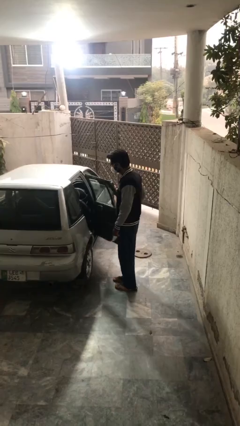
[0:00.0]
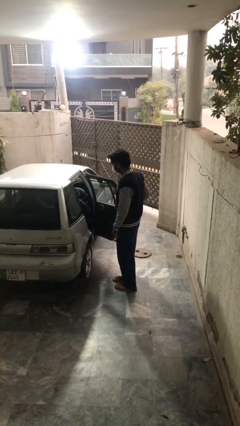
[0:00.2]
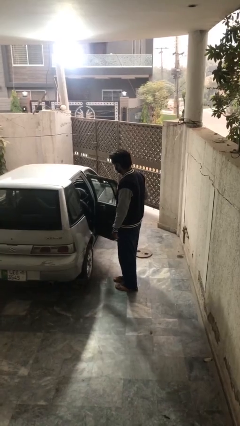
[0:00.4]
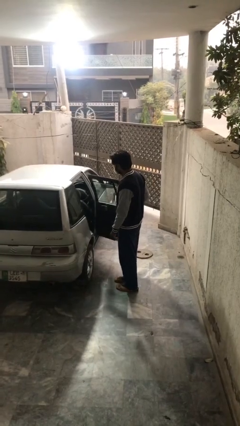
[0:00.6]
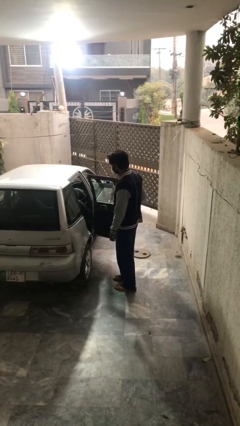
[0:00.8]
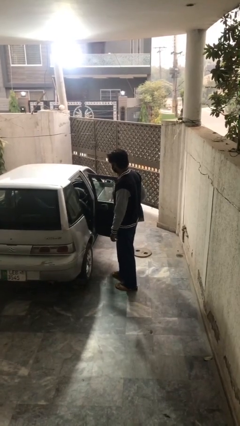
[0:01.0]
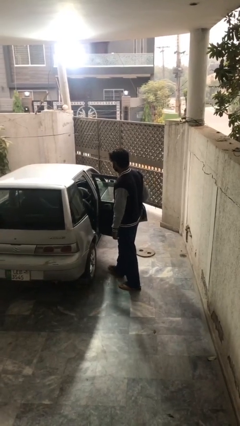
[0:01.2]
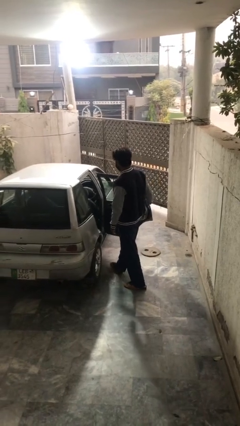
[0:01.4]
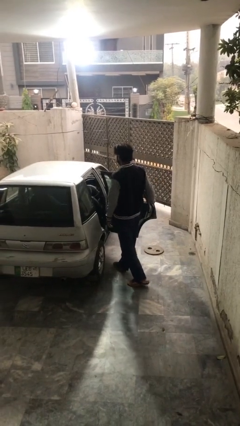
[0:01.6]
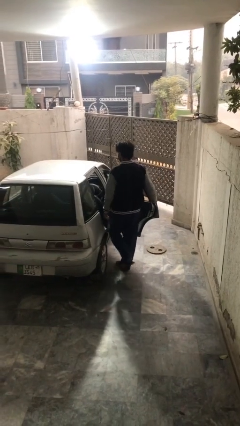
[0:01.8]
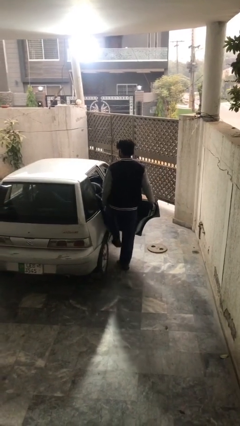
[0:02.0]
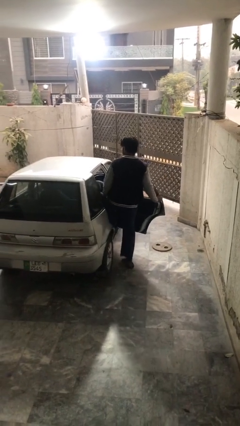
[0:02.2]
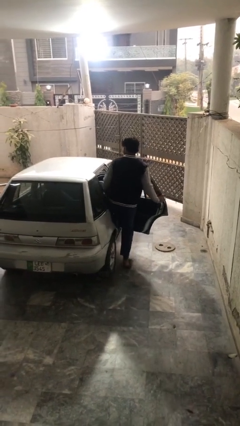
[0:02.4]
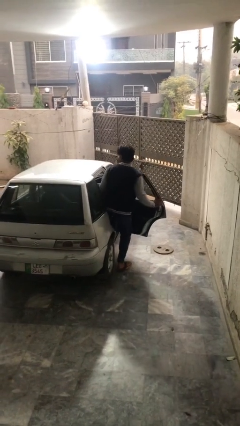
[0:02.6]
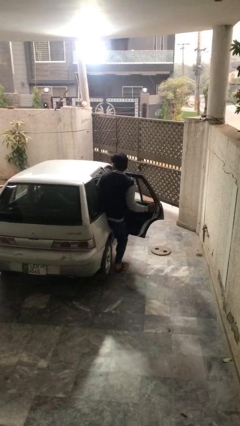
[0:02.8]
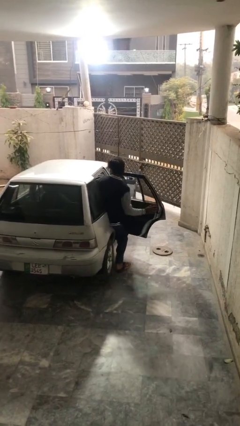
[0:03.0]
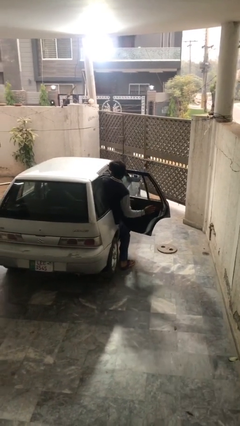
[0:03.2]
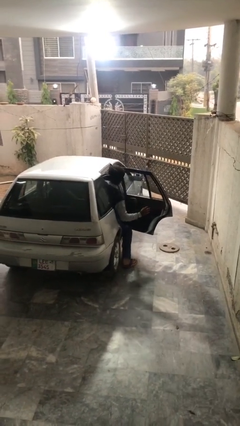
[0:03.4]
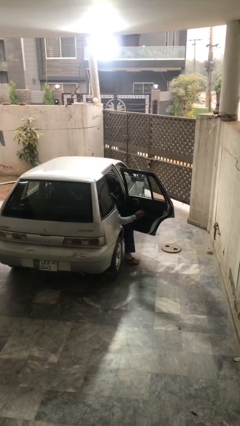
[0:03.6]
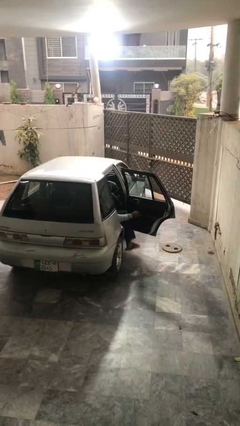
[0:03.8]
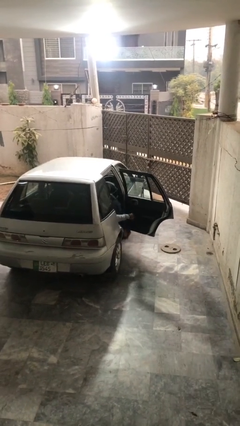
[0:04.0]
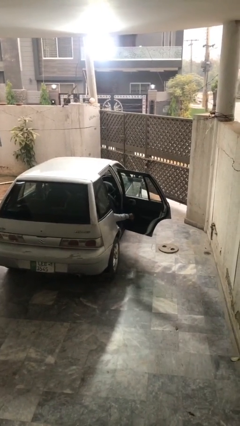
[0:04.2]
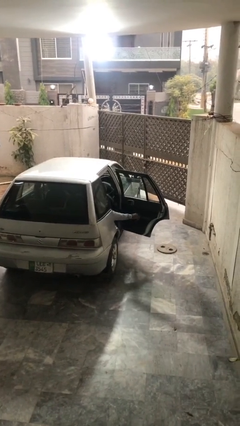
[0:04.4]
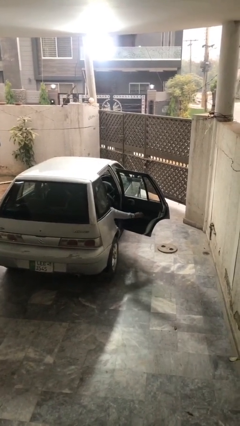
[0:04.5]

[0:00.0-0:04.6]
person enters car

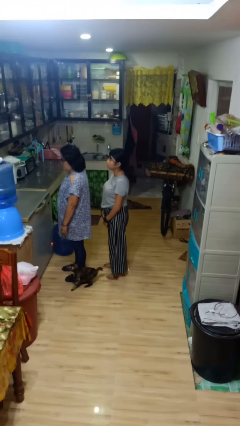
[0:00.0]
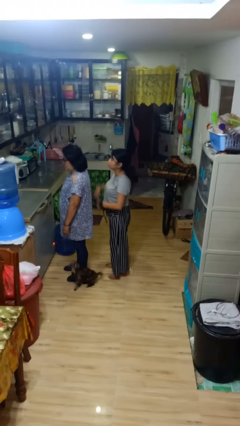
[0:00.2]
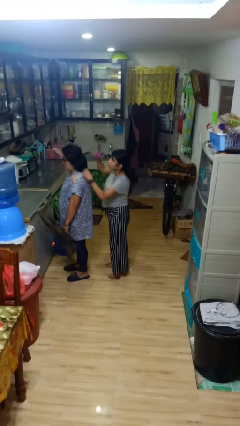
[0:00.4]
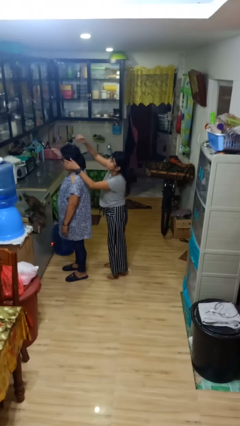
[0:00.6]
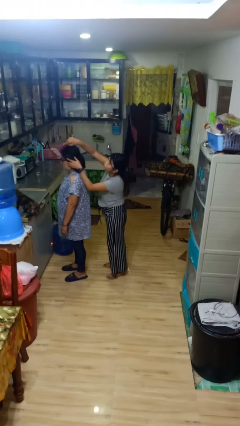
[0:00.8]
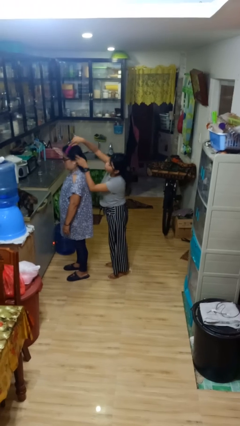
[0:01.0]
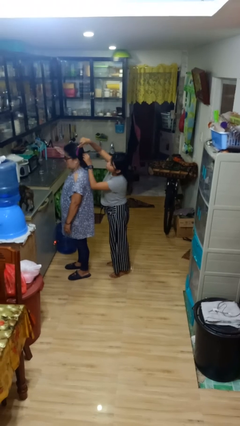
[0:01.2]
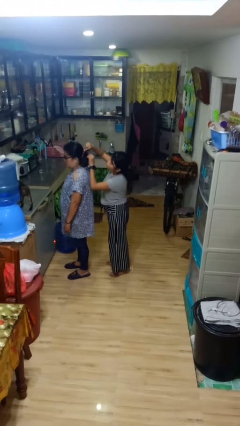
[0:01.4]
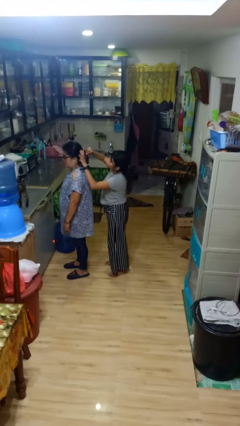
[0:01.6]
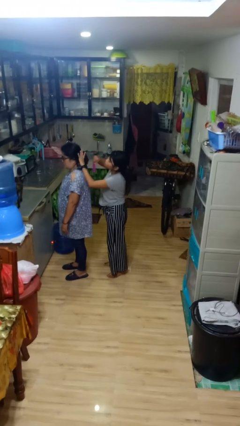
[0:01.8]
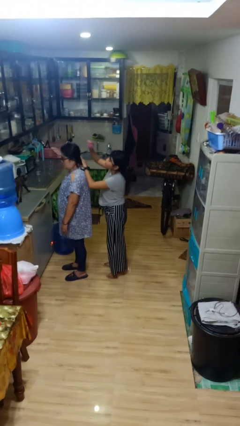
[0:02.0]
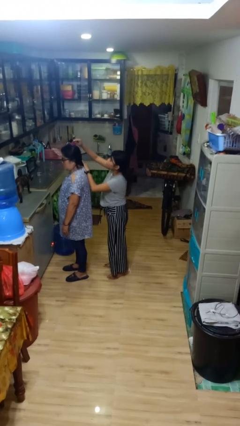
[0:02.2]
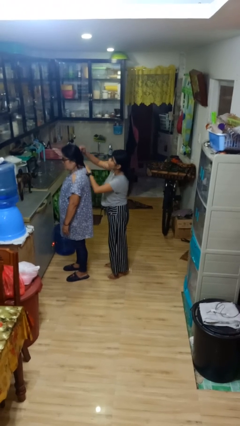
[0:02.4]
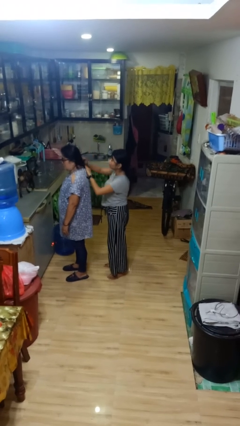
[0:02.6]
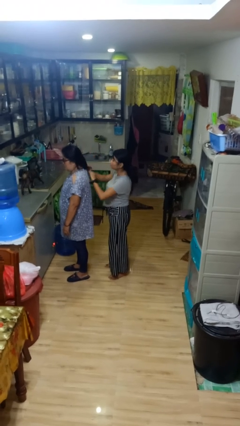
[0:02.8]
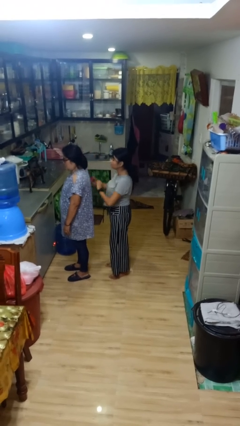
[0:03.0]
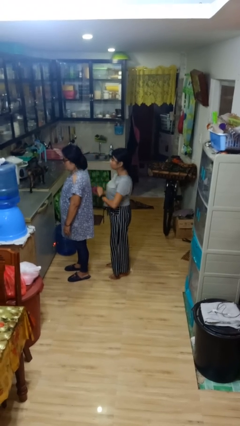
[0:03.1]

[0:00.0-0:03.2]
person brushes hair of person

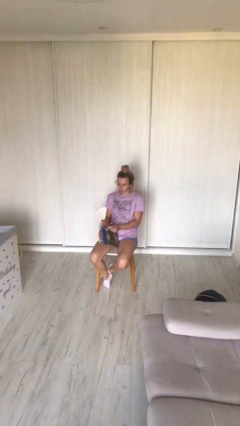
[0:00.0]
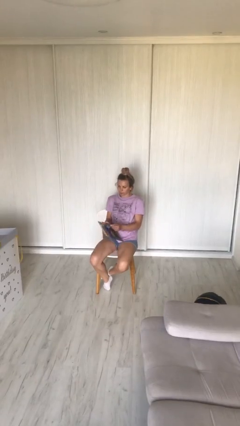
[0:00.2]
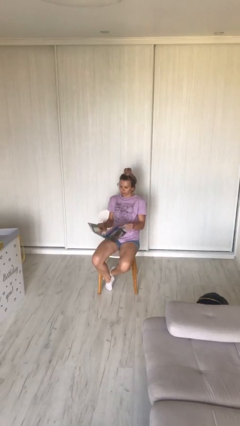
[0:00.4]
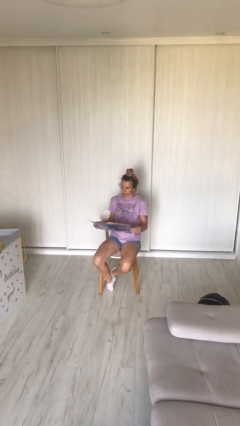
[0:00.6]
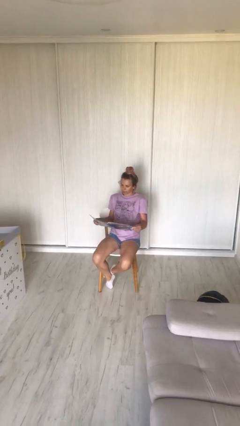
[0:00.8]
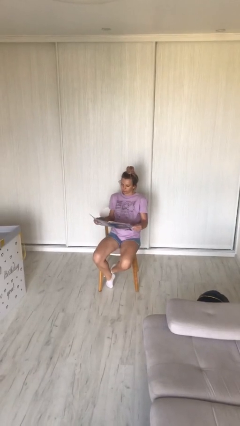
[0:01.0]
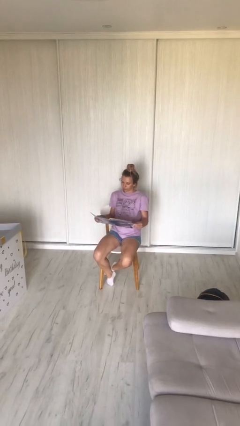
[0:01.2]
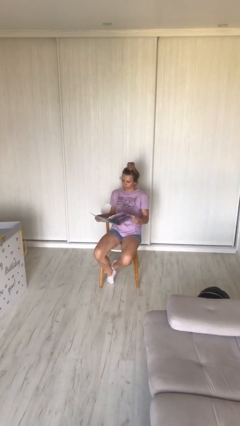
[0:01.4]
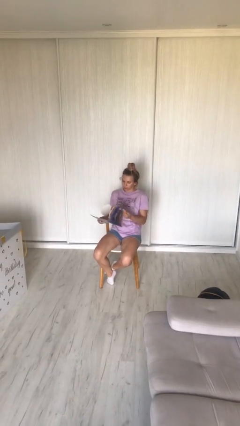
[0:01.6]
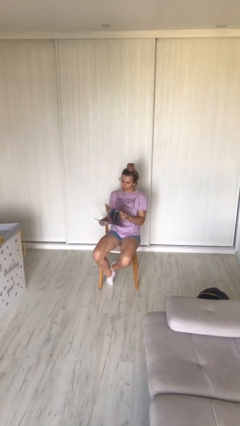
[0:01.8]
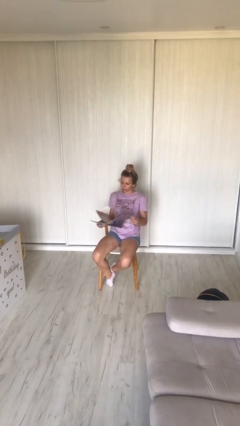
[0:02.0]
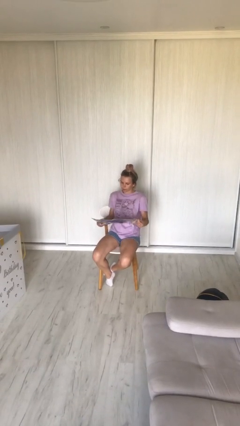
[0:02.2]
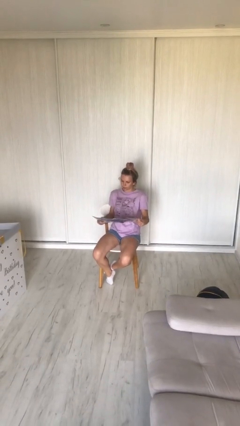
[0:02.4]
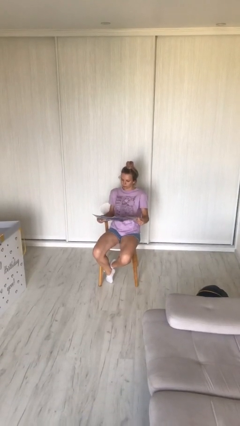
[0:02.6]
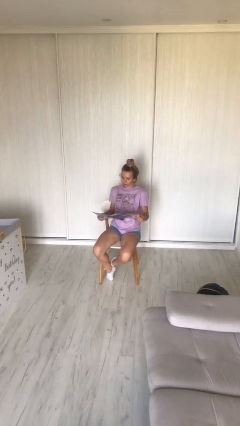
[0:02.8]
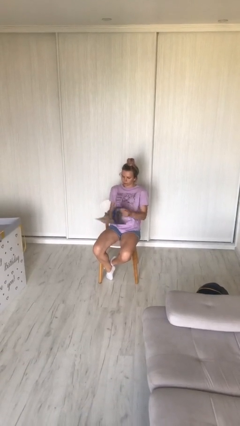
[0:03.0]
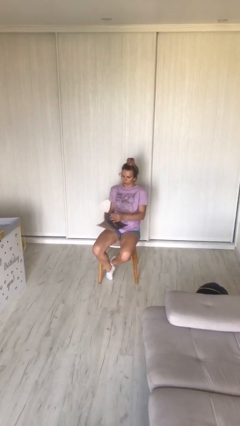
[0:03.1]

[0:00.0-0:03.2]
person reads magazine

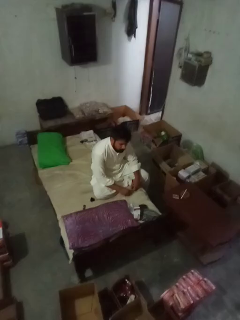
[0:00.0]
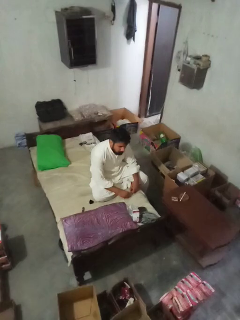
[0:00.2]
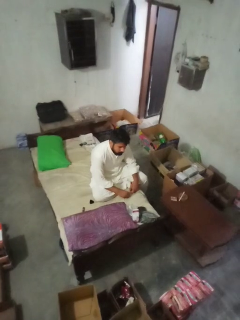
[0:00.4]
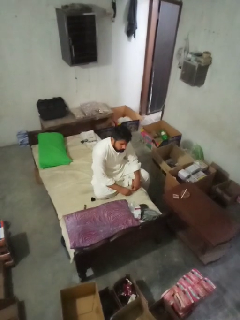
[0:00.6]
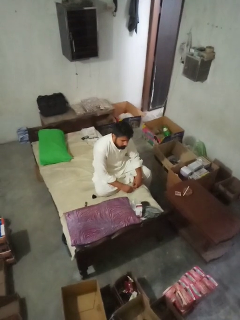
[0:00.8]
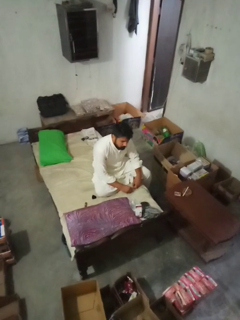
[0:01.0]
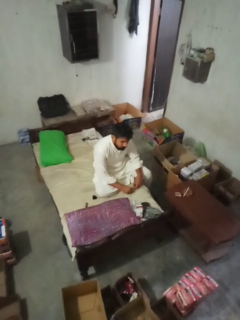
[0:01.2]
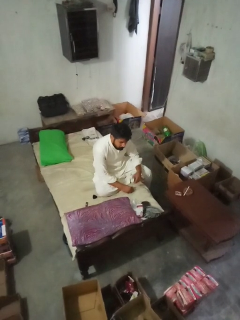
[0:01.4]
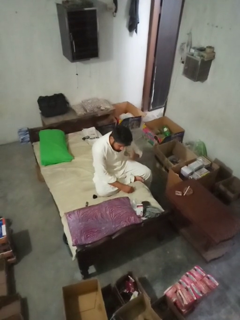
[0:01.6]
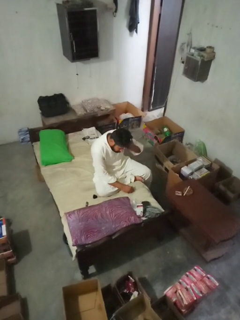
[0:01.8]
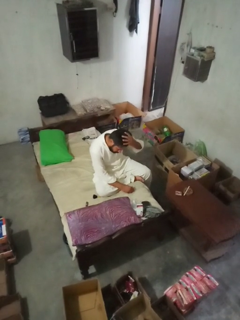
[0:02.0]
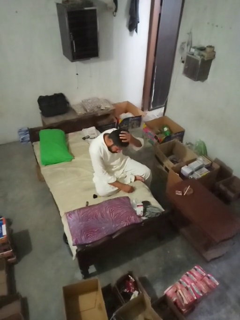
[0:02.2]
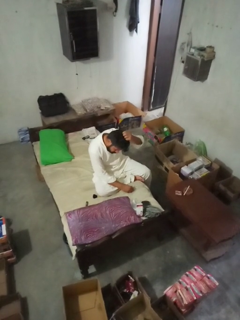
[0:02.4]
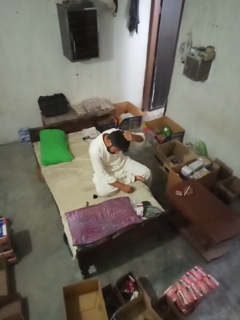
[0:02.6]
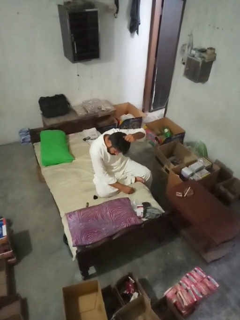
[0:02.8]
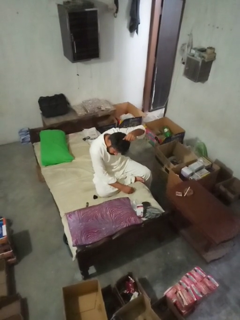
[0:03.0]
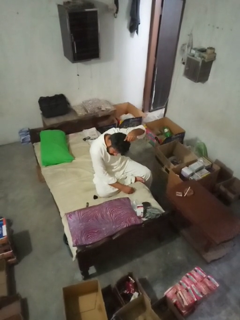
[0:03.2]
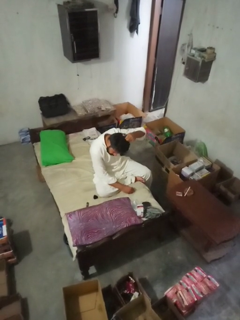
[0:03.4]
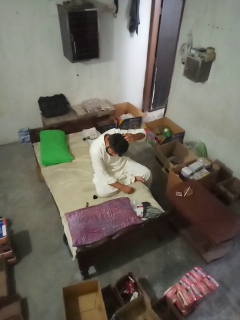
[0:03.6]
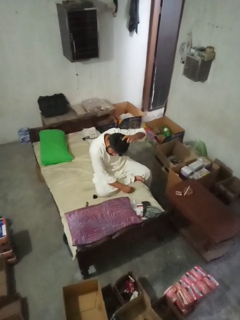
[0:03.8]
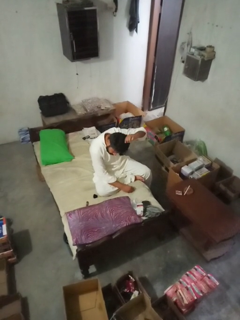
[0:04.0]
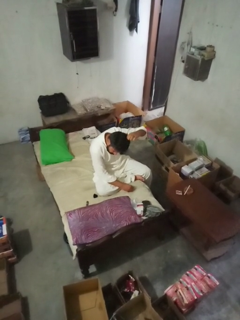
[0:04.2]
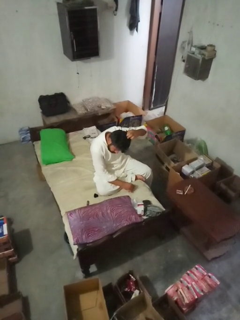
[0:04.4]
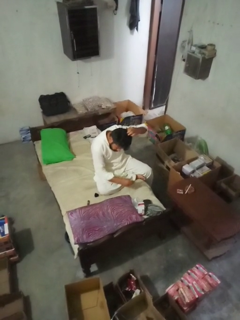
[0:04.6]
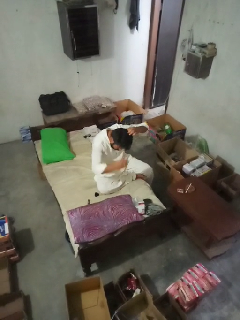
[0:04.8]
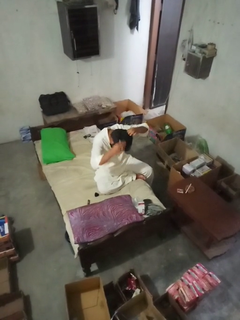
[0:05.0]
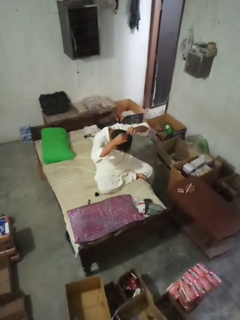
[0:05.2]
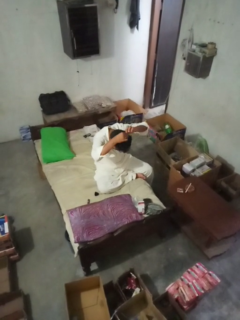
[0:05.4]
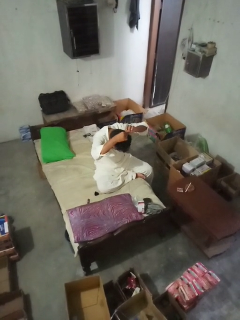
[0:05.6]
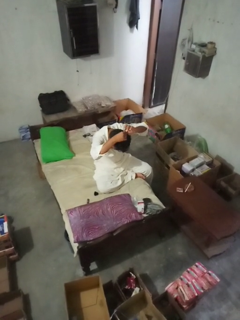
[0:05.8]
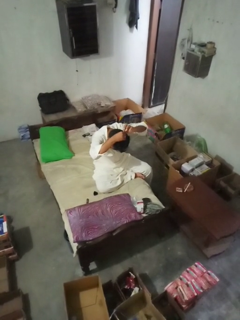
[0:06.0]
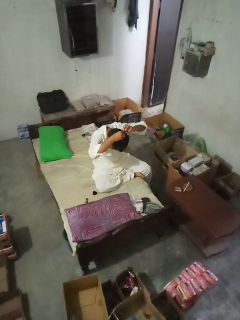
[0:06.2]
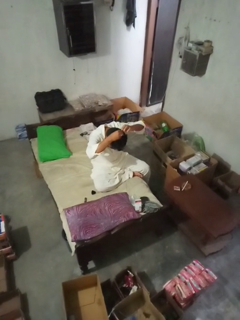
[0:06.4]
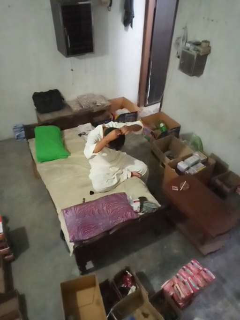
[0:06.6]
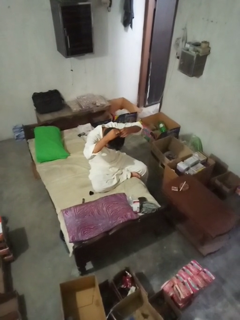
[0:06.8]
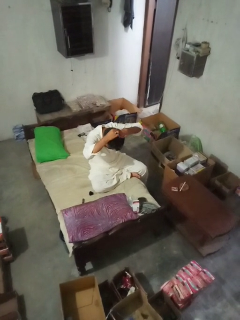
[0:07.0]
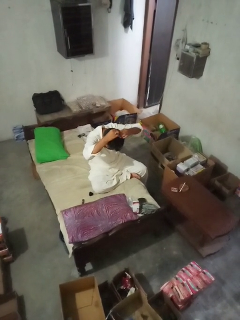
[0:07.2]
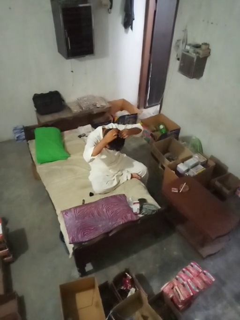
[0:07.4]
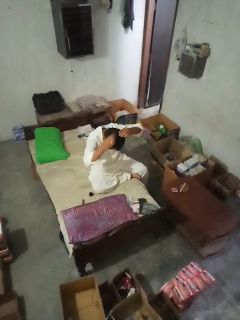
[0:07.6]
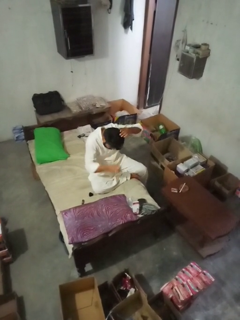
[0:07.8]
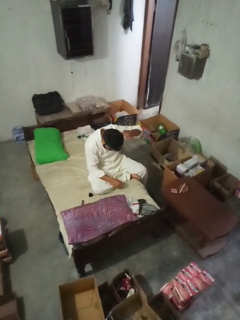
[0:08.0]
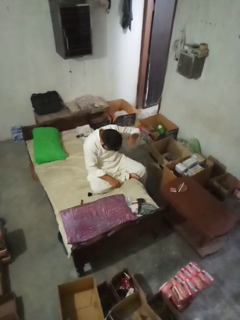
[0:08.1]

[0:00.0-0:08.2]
person puts hair in ponytail

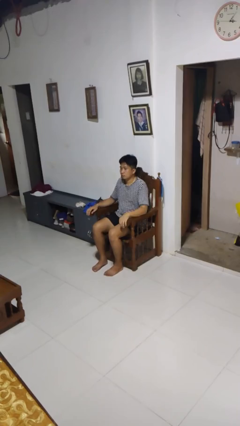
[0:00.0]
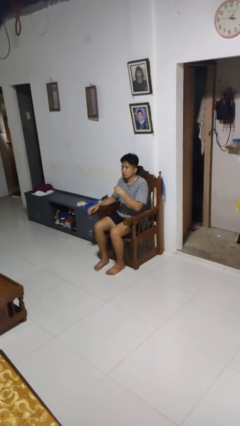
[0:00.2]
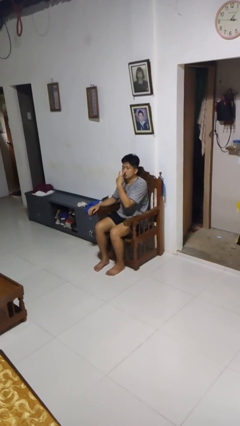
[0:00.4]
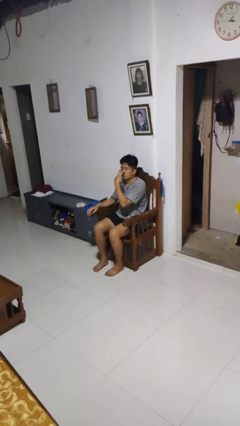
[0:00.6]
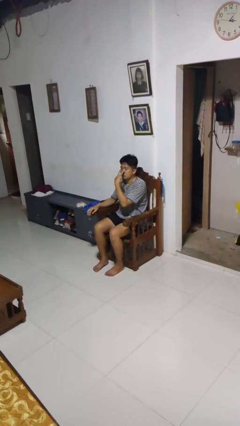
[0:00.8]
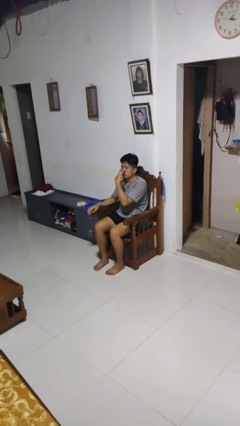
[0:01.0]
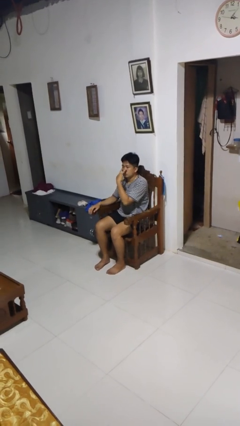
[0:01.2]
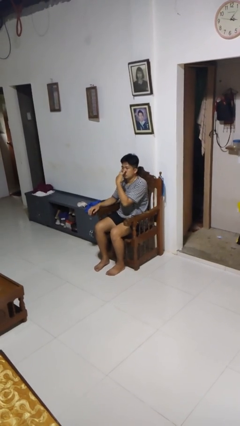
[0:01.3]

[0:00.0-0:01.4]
person gestures watch closely
